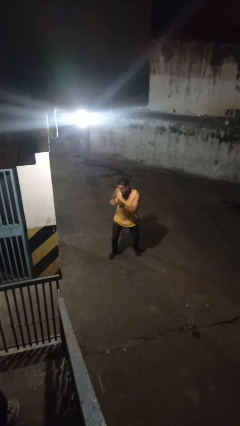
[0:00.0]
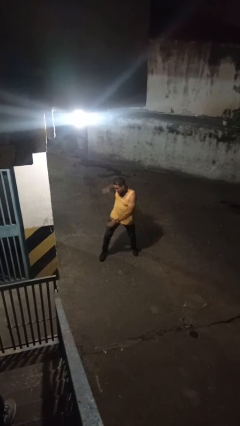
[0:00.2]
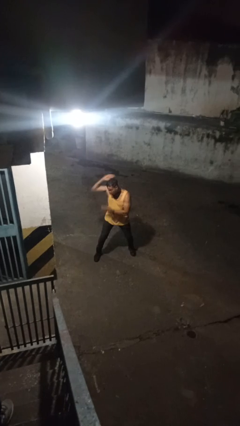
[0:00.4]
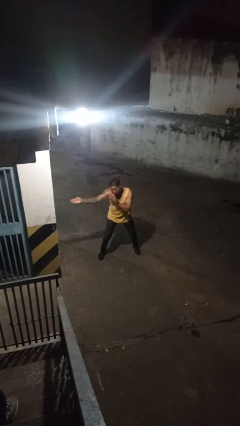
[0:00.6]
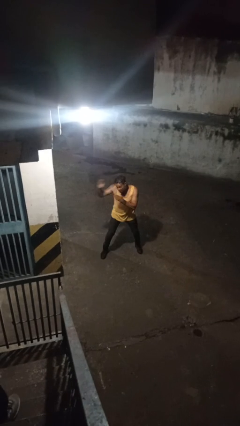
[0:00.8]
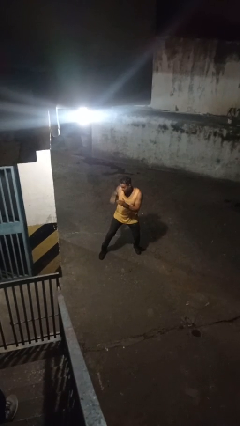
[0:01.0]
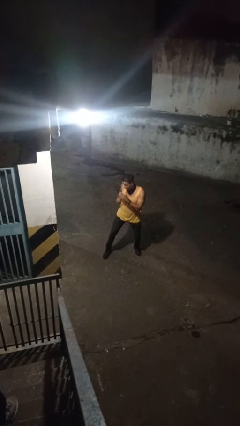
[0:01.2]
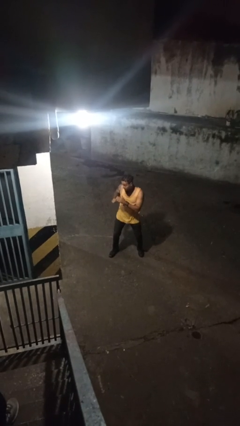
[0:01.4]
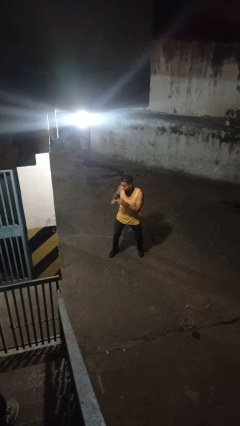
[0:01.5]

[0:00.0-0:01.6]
person karate chop

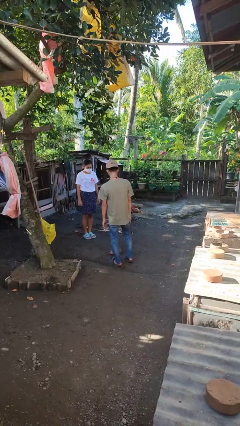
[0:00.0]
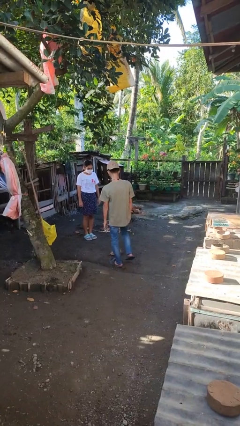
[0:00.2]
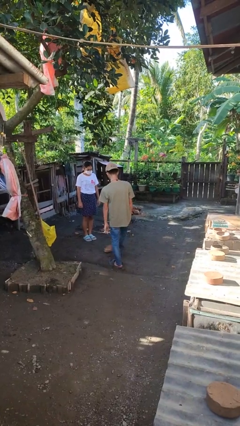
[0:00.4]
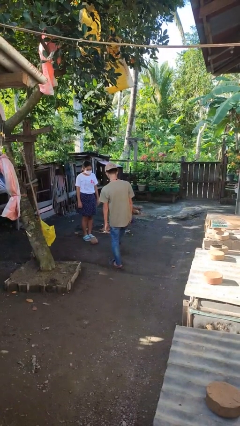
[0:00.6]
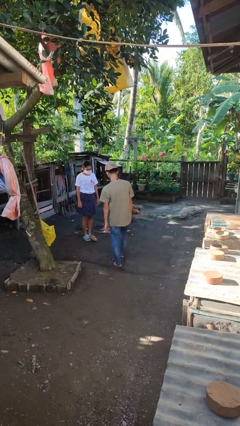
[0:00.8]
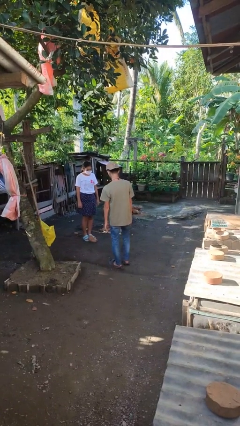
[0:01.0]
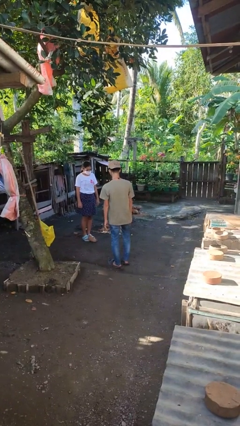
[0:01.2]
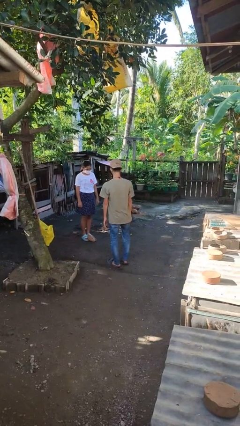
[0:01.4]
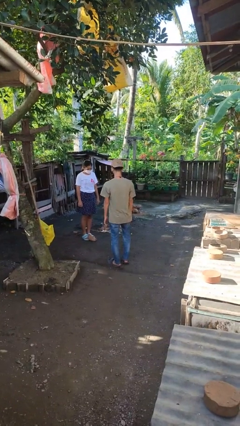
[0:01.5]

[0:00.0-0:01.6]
person kicks object to person

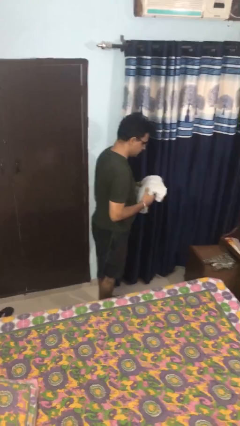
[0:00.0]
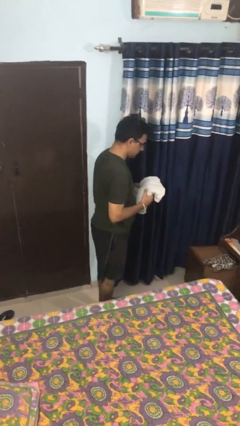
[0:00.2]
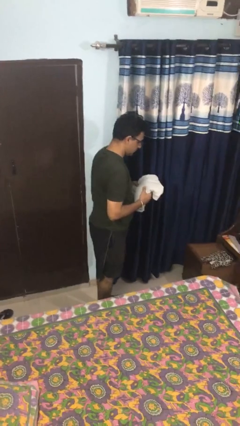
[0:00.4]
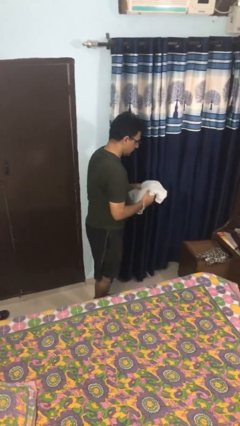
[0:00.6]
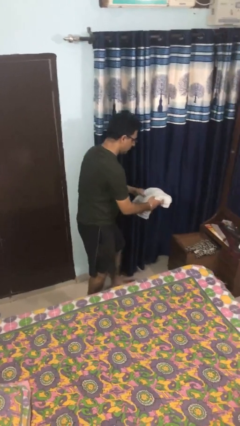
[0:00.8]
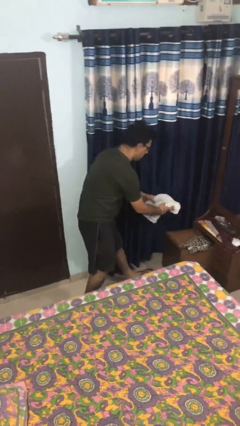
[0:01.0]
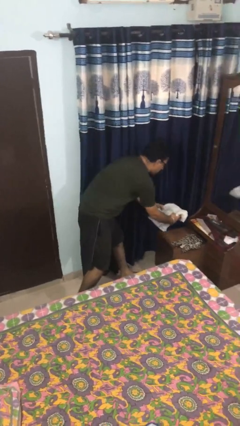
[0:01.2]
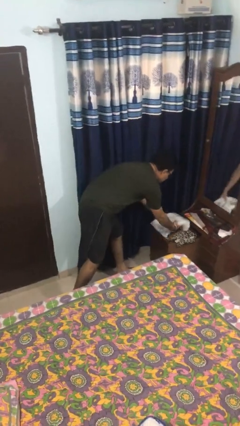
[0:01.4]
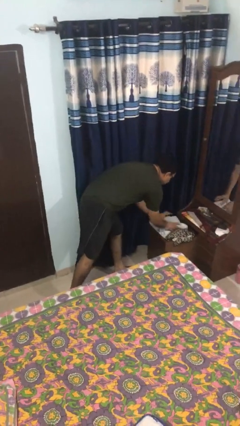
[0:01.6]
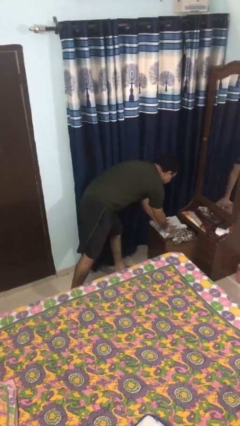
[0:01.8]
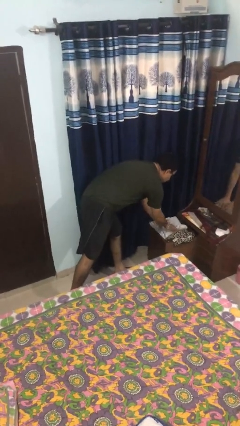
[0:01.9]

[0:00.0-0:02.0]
person puts clothes into dresser

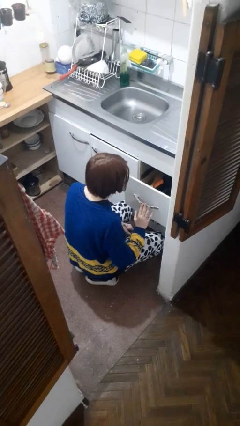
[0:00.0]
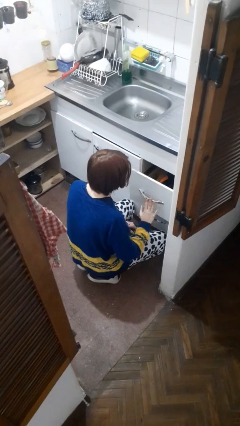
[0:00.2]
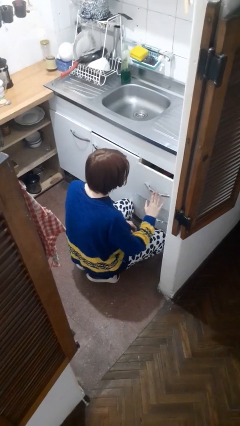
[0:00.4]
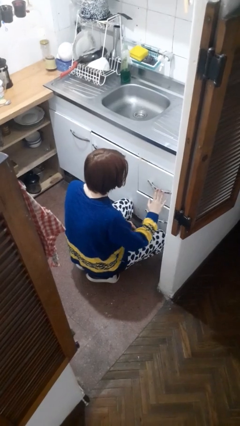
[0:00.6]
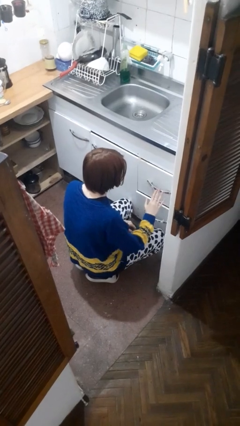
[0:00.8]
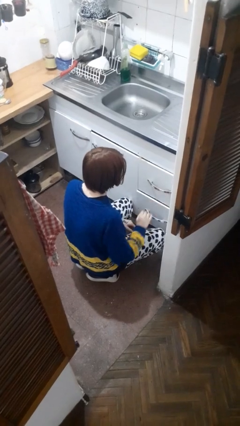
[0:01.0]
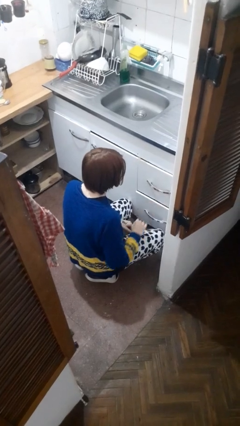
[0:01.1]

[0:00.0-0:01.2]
person closes kitchen drawer

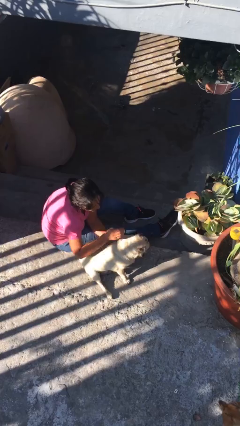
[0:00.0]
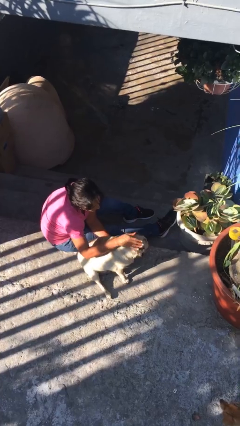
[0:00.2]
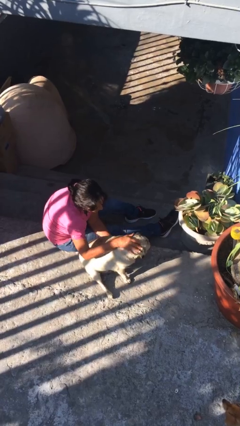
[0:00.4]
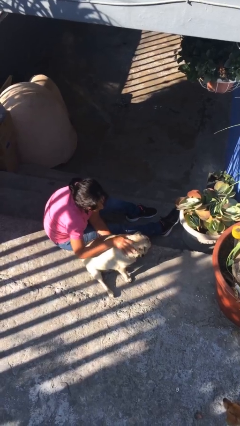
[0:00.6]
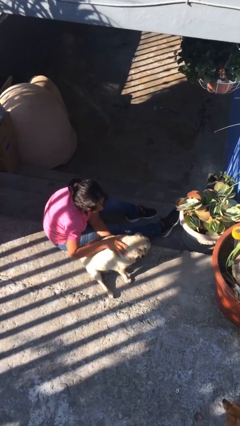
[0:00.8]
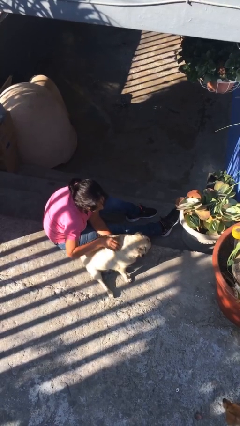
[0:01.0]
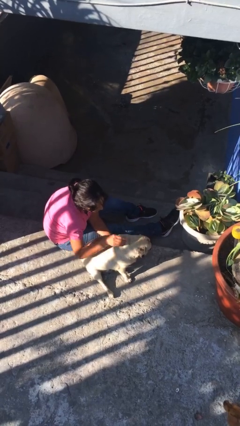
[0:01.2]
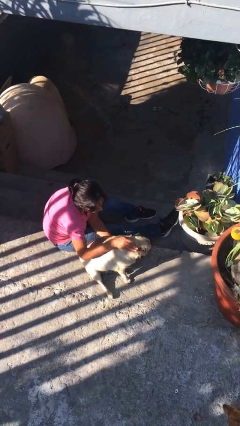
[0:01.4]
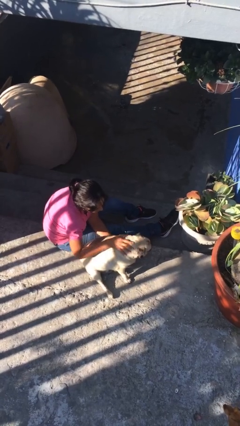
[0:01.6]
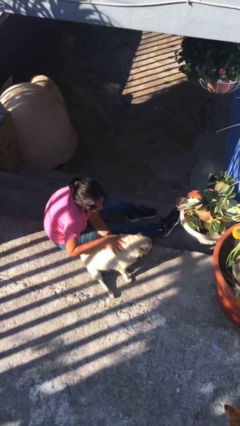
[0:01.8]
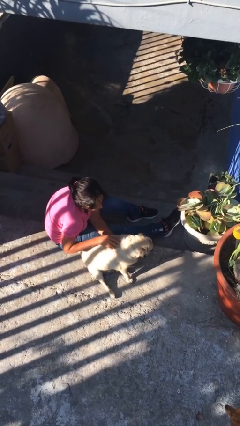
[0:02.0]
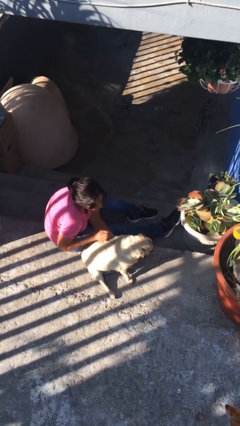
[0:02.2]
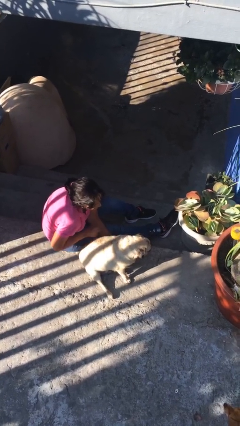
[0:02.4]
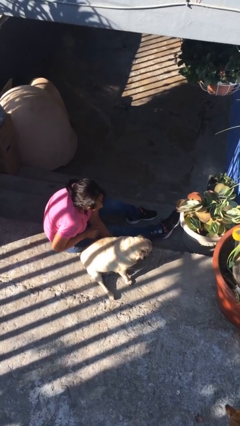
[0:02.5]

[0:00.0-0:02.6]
person pets dog

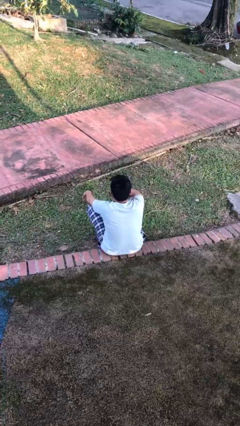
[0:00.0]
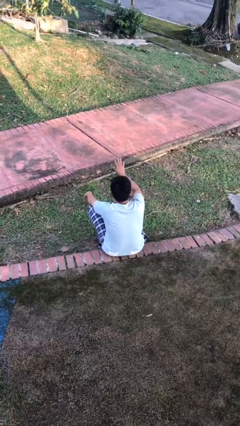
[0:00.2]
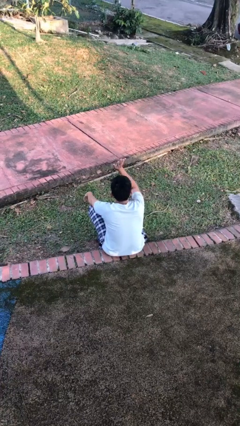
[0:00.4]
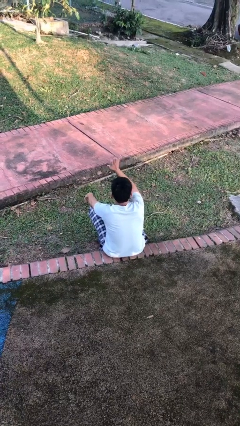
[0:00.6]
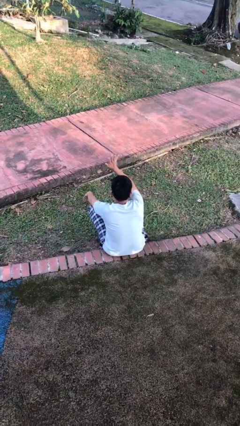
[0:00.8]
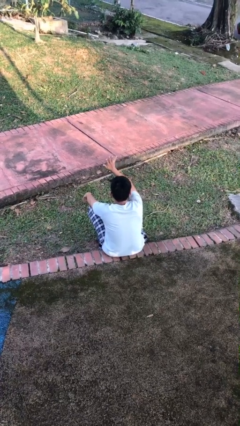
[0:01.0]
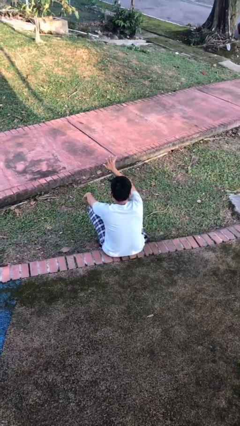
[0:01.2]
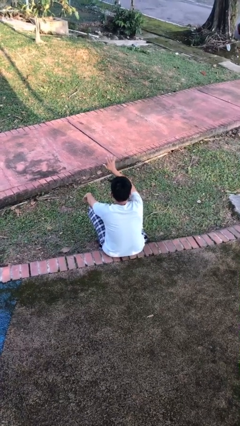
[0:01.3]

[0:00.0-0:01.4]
person gestures stop

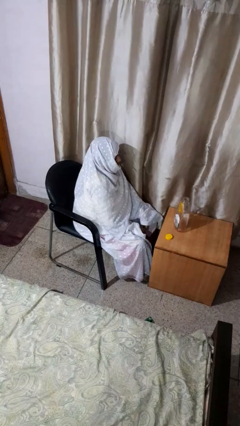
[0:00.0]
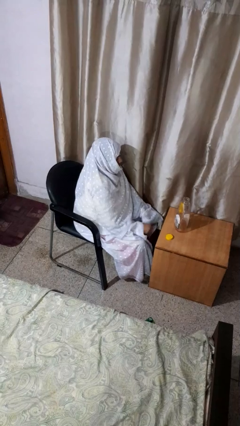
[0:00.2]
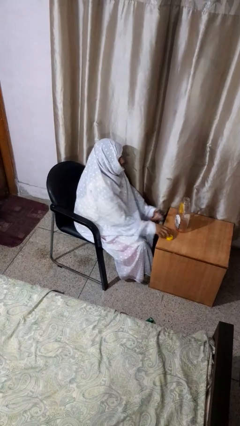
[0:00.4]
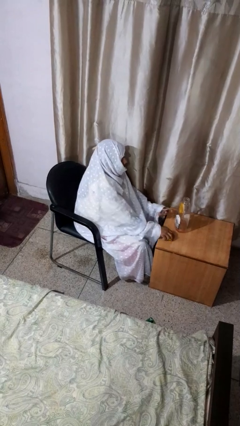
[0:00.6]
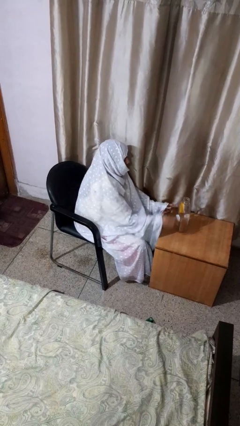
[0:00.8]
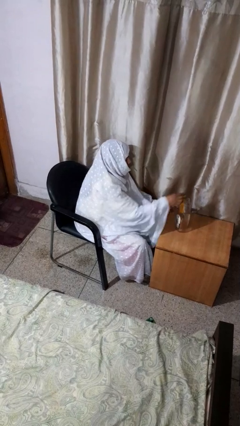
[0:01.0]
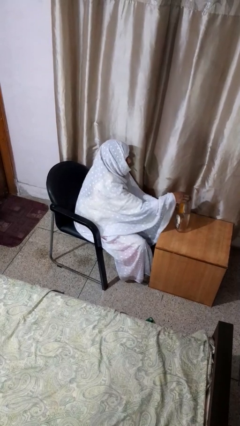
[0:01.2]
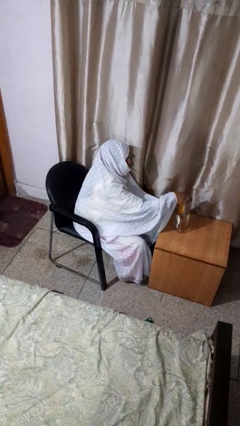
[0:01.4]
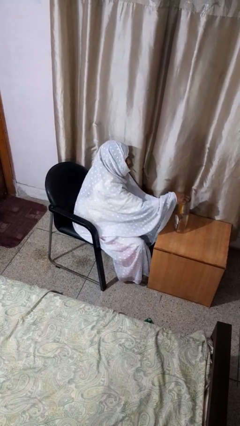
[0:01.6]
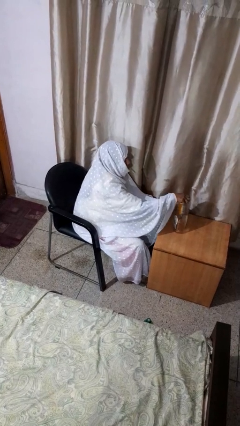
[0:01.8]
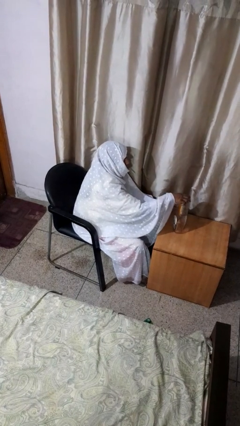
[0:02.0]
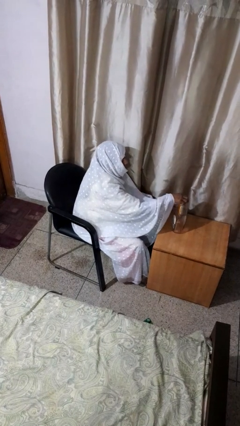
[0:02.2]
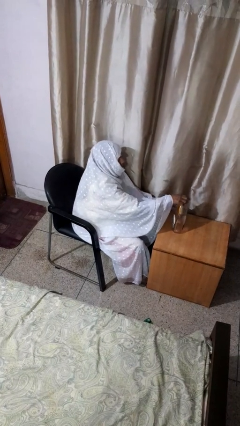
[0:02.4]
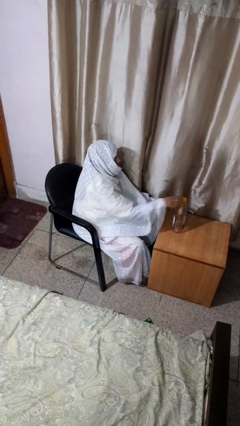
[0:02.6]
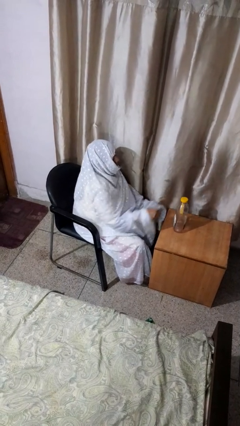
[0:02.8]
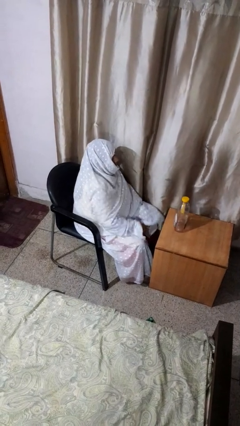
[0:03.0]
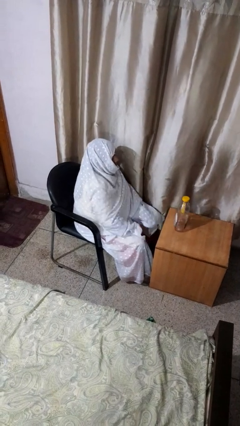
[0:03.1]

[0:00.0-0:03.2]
person screws lid to bottle

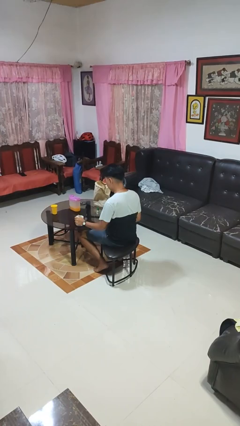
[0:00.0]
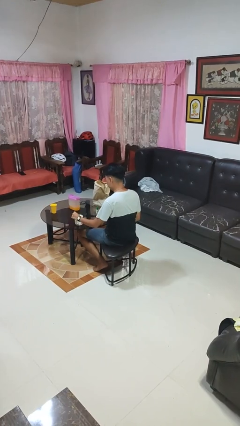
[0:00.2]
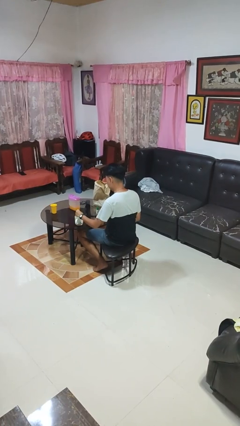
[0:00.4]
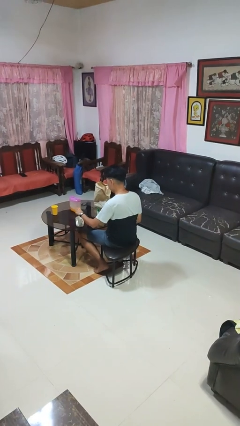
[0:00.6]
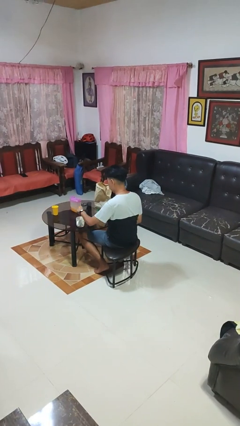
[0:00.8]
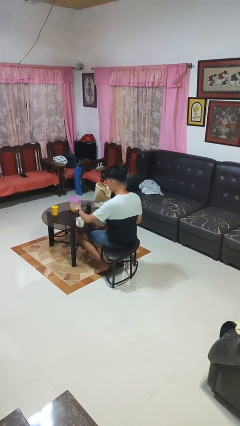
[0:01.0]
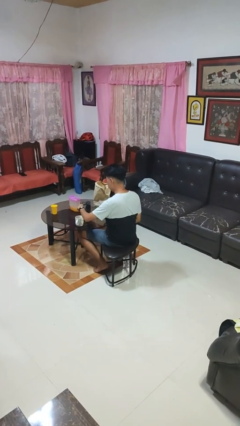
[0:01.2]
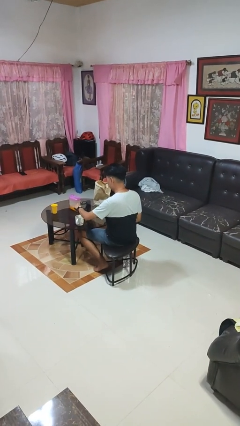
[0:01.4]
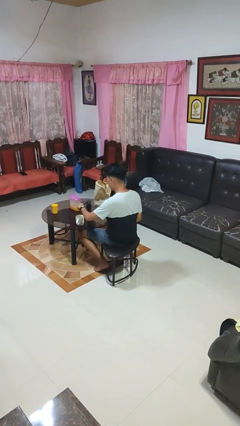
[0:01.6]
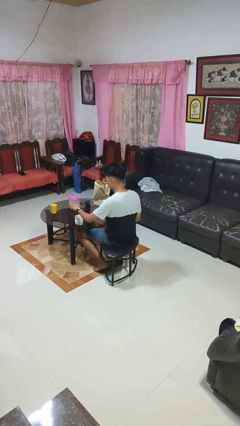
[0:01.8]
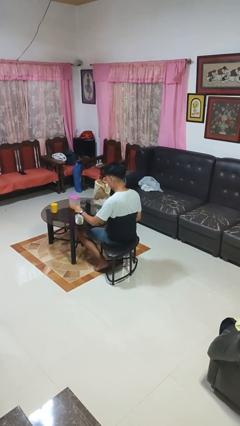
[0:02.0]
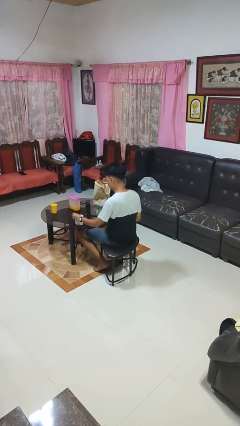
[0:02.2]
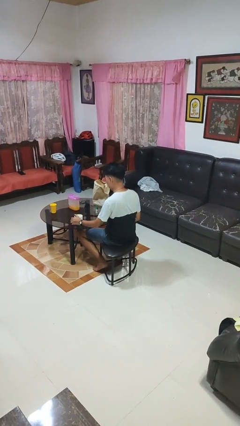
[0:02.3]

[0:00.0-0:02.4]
person stirs mug

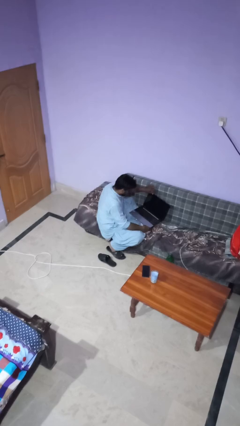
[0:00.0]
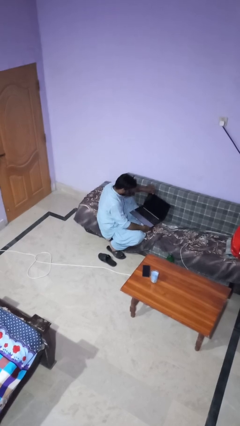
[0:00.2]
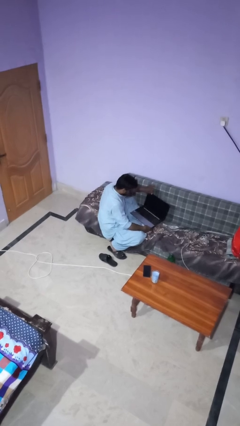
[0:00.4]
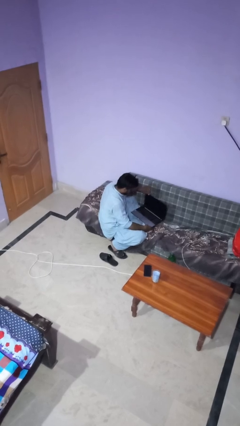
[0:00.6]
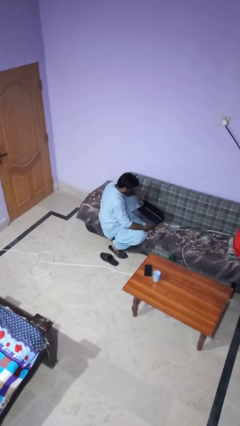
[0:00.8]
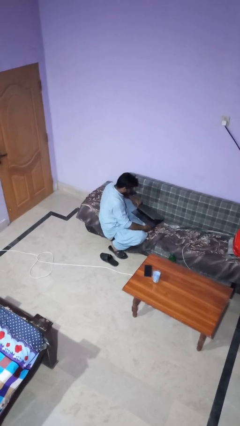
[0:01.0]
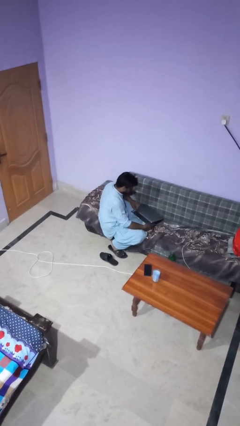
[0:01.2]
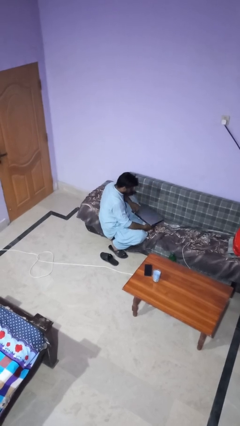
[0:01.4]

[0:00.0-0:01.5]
person closes laptop
